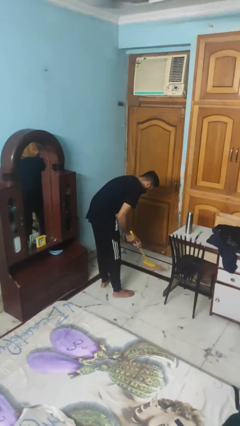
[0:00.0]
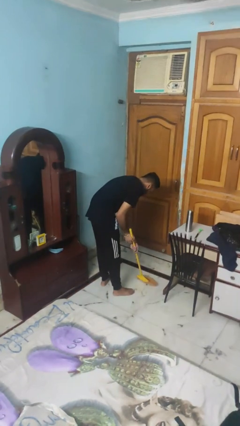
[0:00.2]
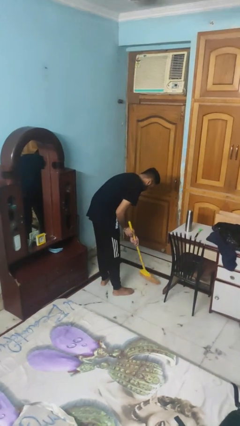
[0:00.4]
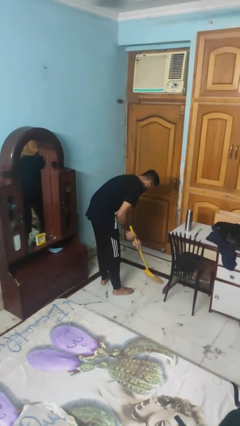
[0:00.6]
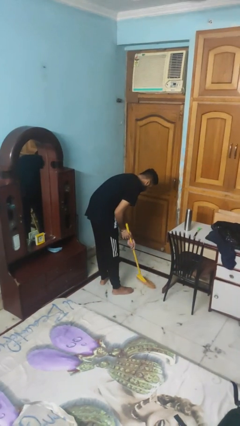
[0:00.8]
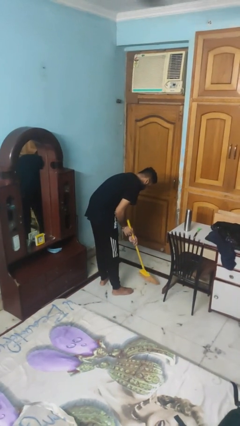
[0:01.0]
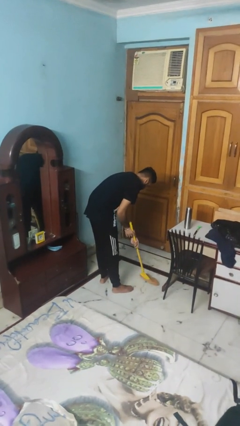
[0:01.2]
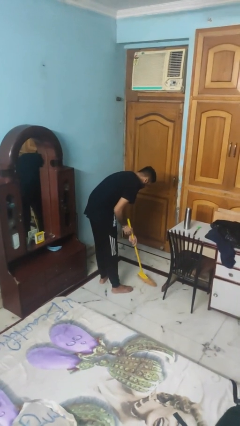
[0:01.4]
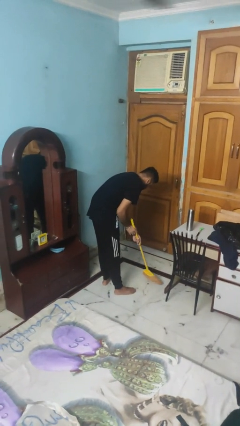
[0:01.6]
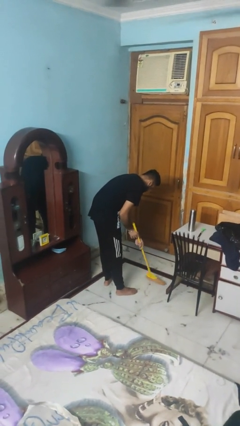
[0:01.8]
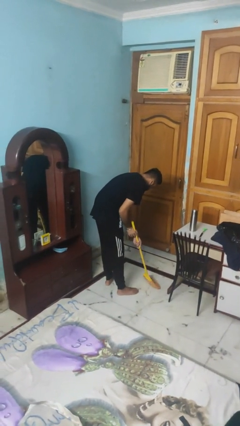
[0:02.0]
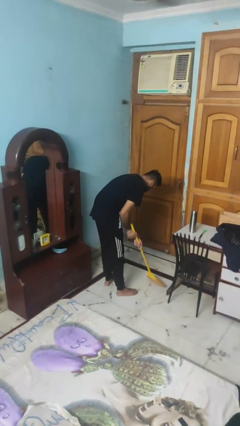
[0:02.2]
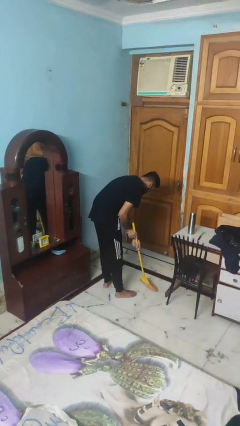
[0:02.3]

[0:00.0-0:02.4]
person sweeps floor

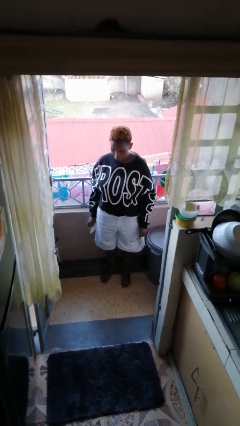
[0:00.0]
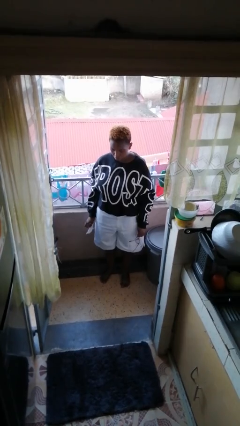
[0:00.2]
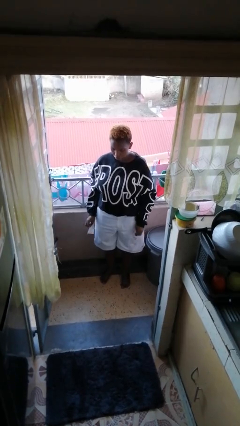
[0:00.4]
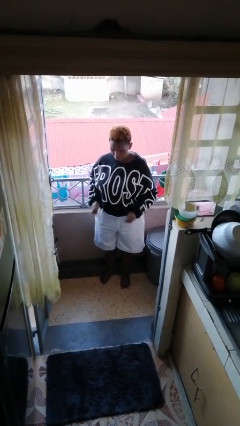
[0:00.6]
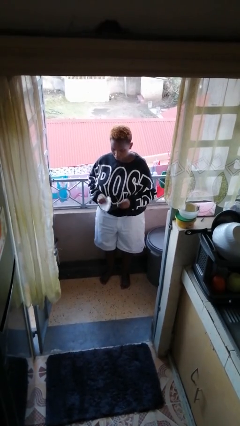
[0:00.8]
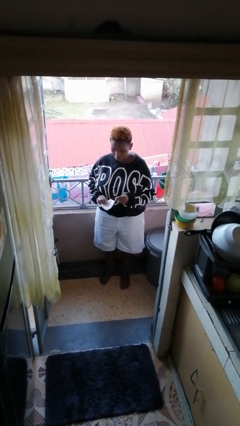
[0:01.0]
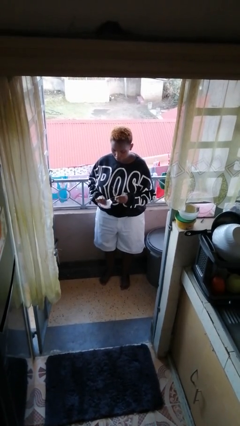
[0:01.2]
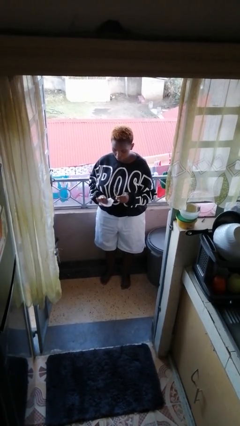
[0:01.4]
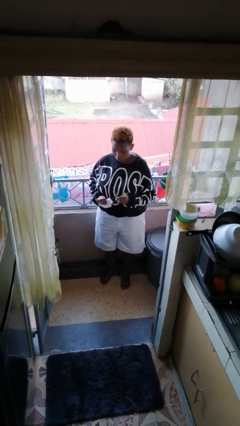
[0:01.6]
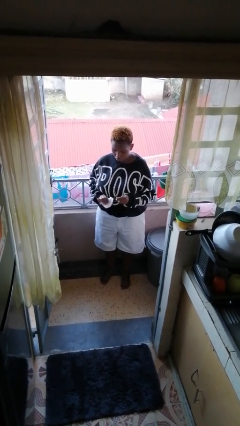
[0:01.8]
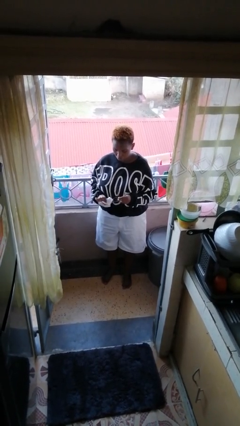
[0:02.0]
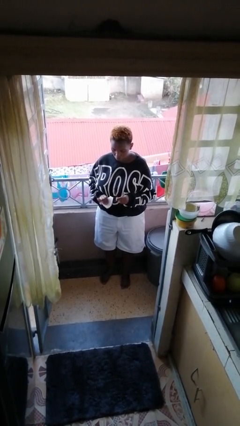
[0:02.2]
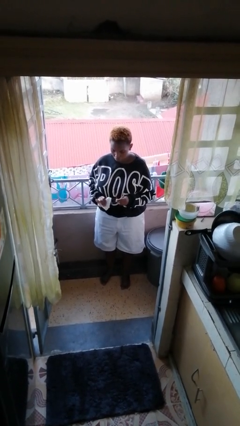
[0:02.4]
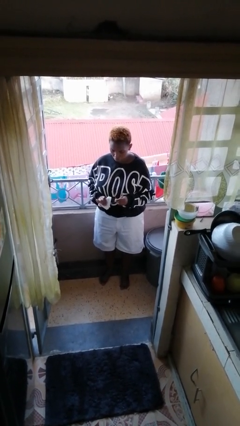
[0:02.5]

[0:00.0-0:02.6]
person cleans eyeglasses

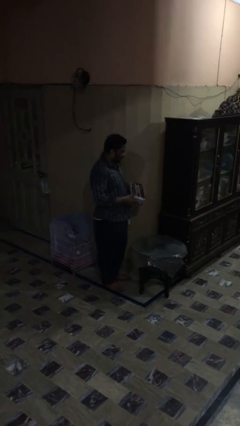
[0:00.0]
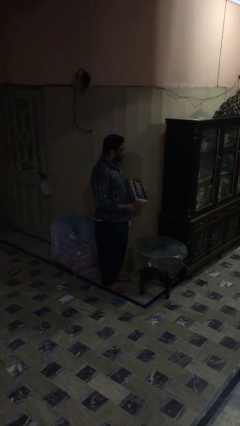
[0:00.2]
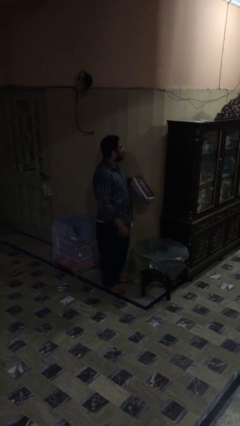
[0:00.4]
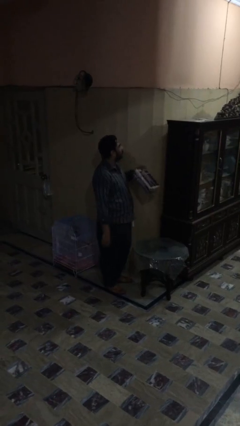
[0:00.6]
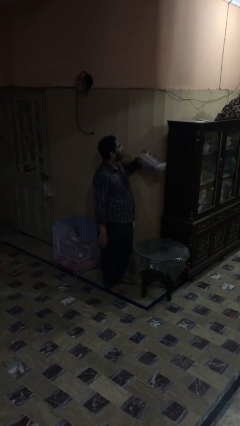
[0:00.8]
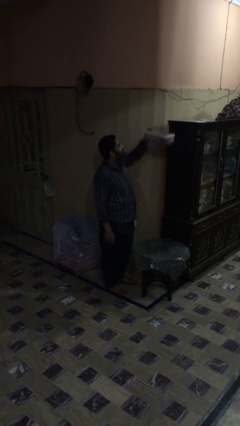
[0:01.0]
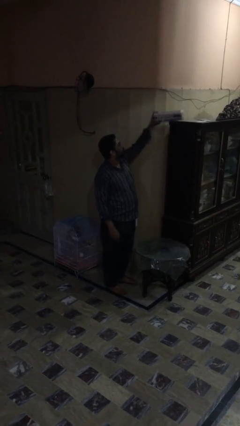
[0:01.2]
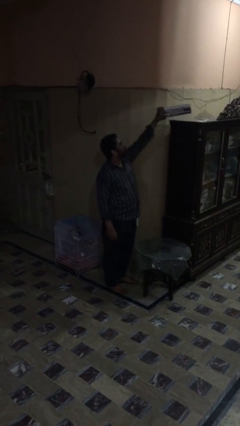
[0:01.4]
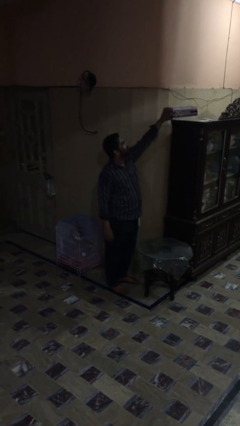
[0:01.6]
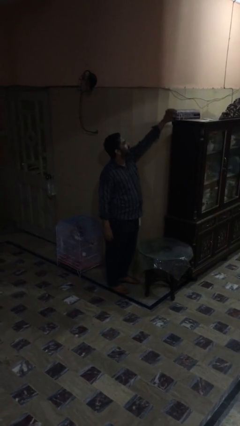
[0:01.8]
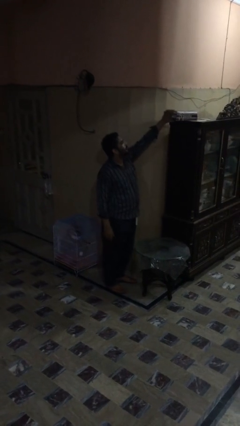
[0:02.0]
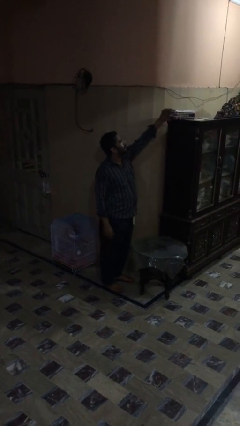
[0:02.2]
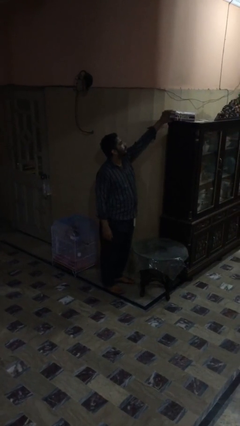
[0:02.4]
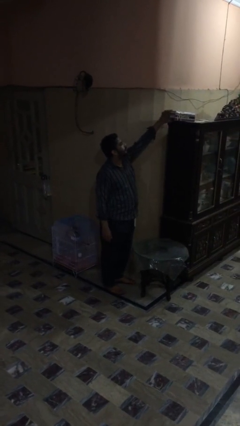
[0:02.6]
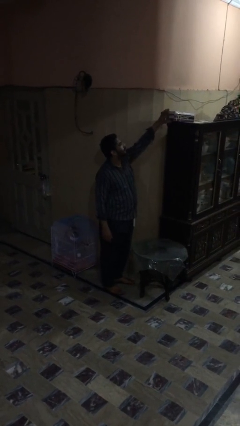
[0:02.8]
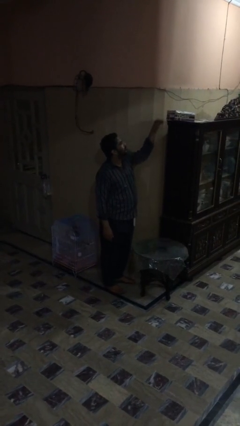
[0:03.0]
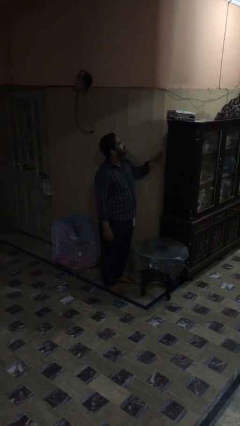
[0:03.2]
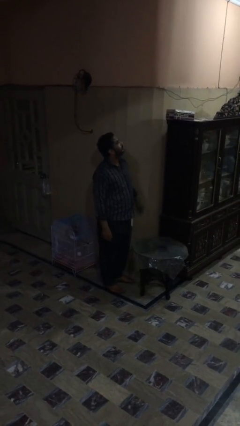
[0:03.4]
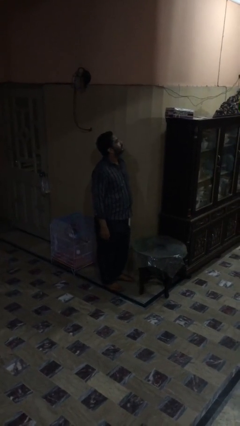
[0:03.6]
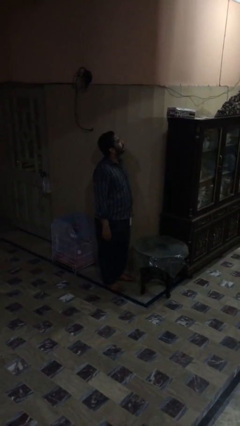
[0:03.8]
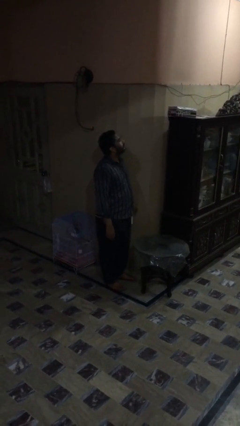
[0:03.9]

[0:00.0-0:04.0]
person puts down object on shelf

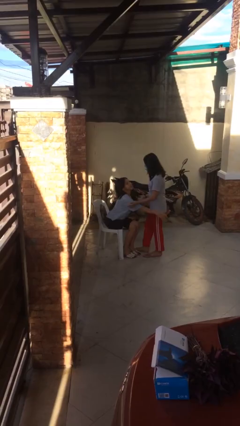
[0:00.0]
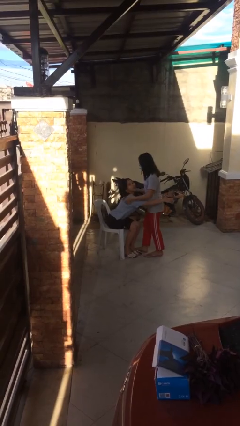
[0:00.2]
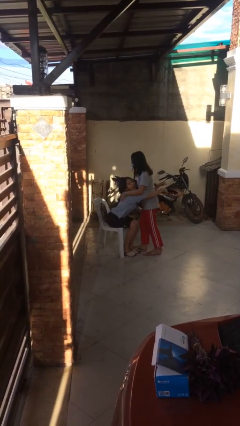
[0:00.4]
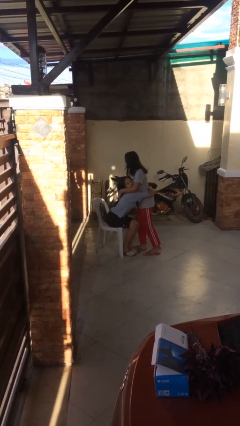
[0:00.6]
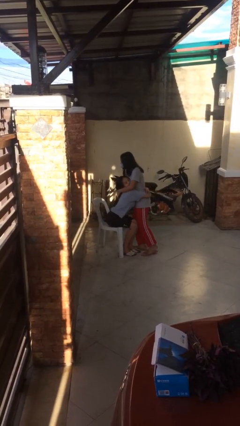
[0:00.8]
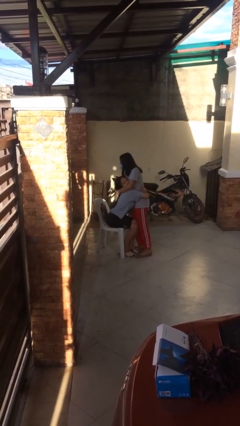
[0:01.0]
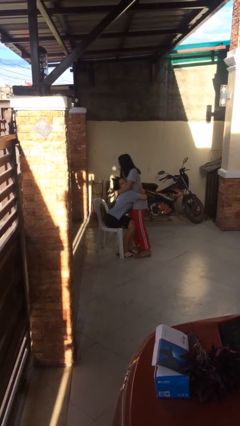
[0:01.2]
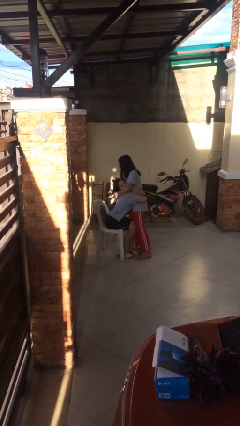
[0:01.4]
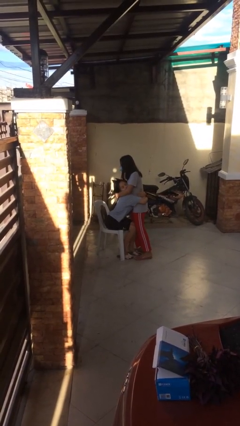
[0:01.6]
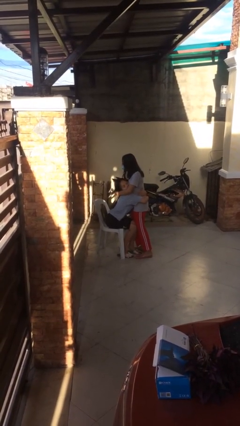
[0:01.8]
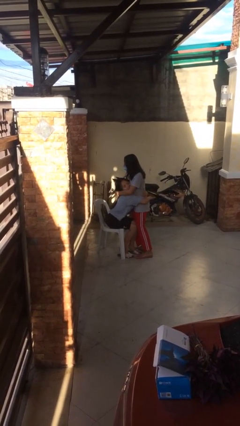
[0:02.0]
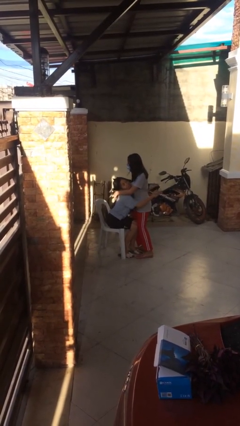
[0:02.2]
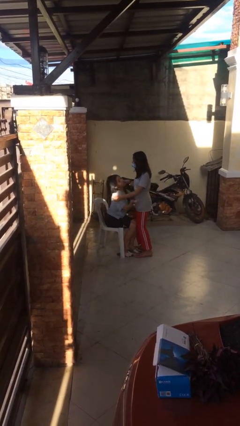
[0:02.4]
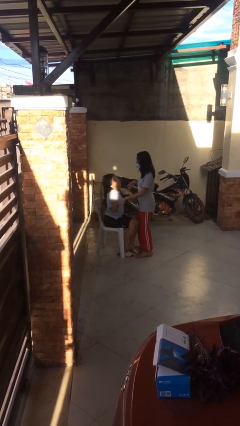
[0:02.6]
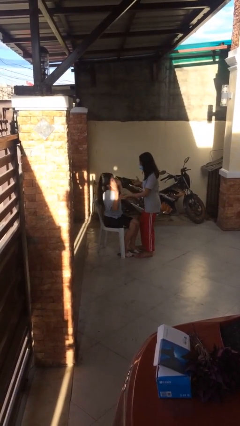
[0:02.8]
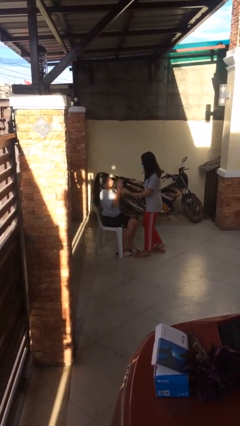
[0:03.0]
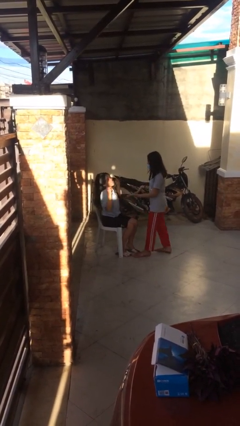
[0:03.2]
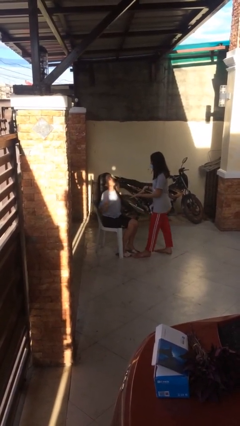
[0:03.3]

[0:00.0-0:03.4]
person embraces person

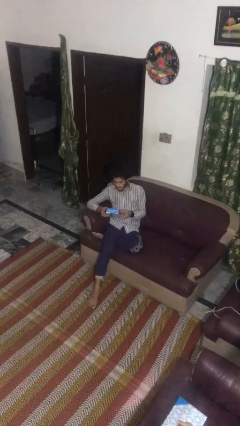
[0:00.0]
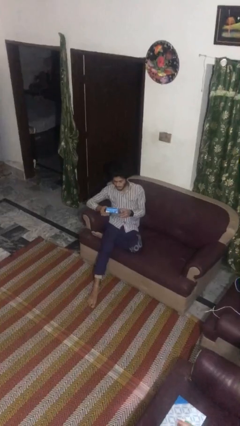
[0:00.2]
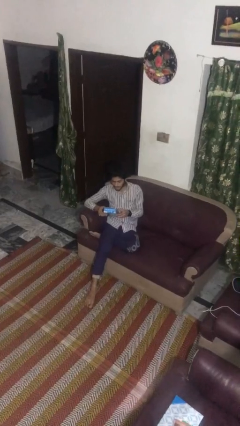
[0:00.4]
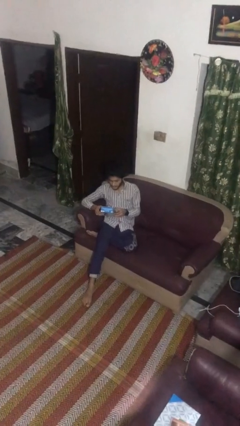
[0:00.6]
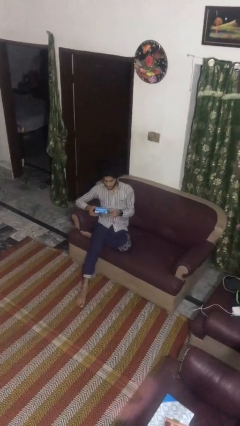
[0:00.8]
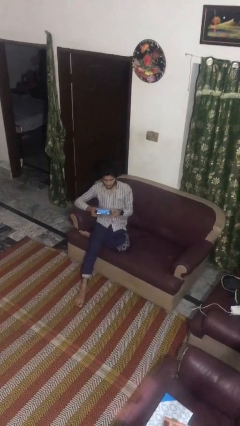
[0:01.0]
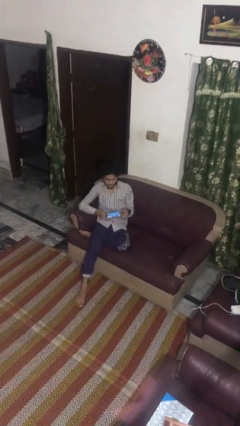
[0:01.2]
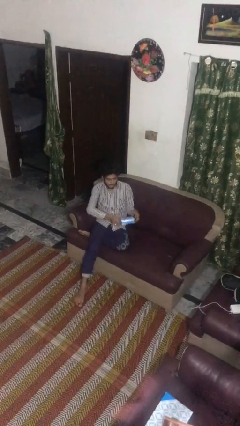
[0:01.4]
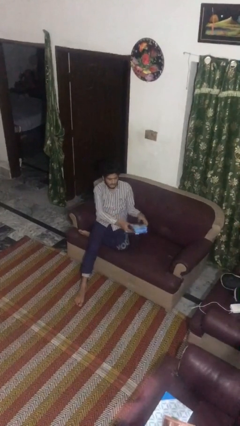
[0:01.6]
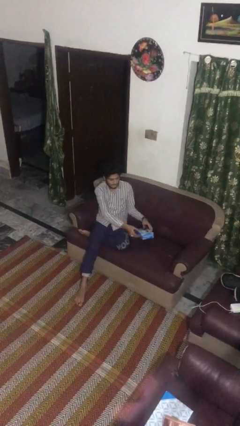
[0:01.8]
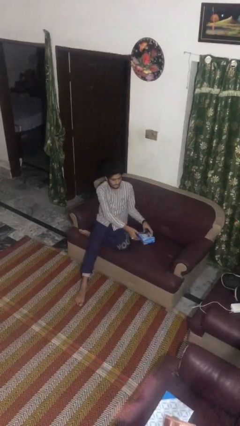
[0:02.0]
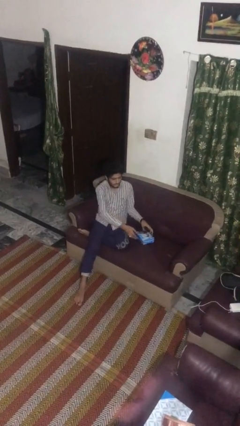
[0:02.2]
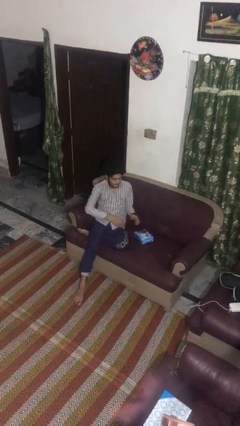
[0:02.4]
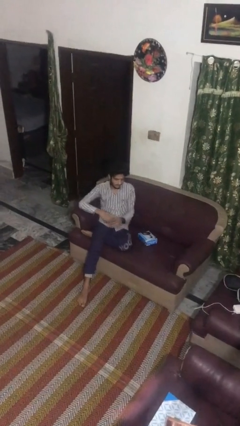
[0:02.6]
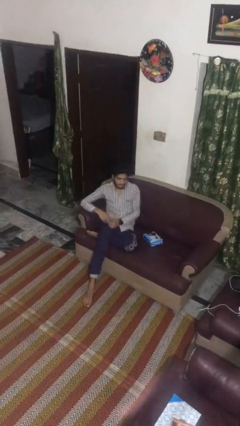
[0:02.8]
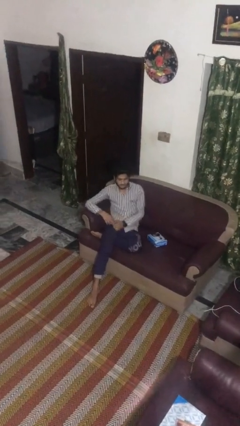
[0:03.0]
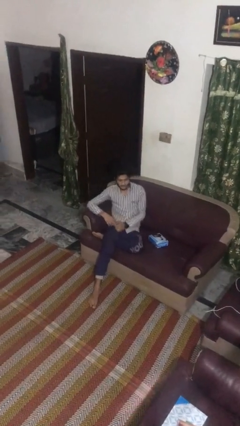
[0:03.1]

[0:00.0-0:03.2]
person puts down object on couch

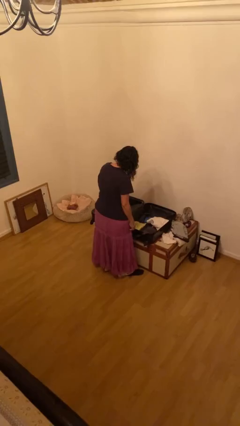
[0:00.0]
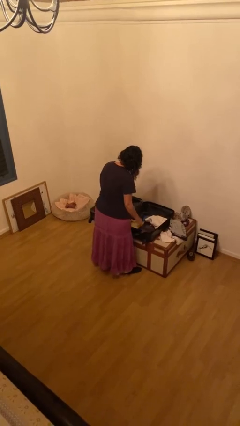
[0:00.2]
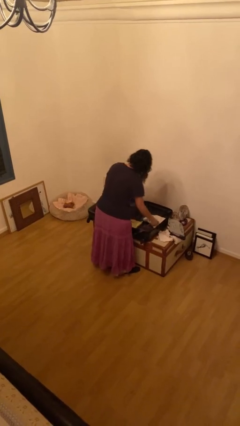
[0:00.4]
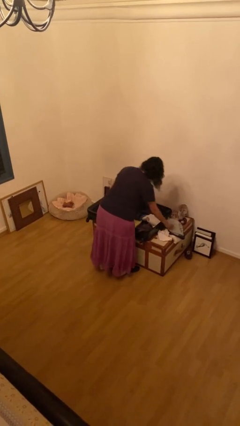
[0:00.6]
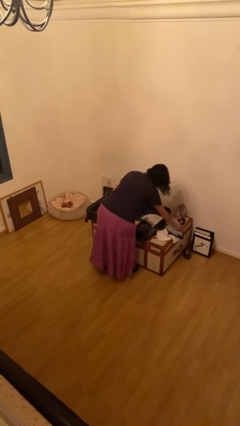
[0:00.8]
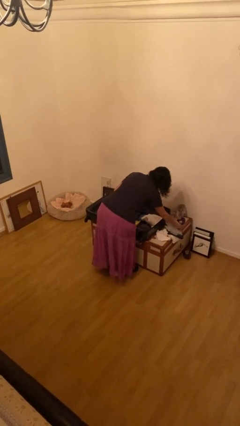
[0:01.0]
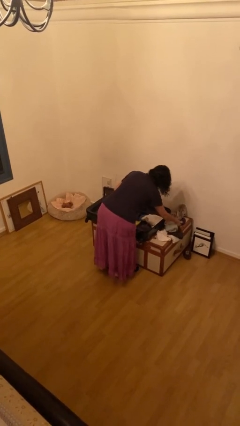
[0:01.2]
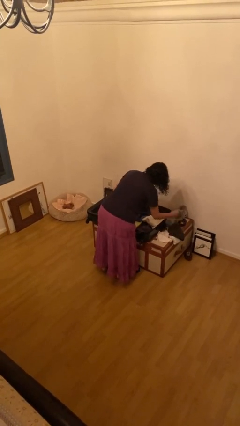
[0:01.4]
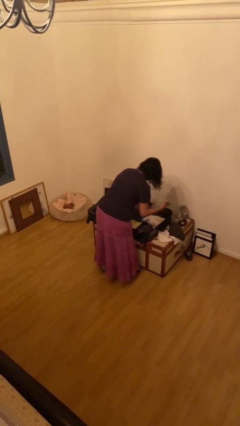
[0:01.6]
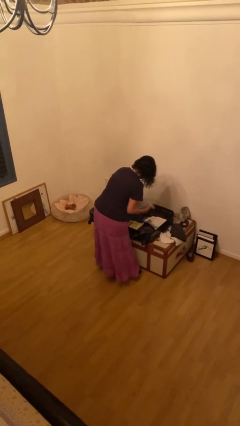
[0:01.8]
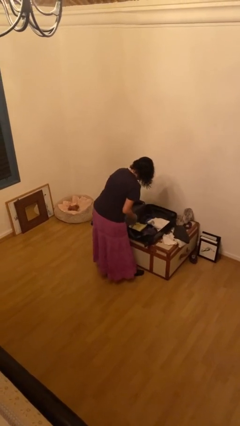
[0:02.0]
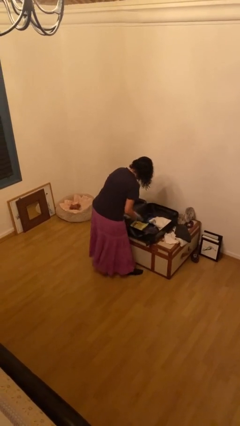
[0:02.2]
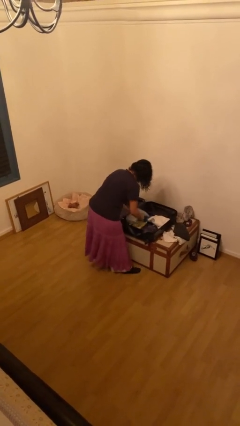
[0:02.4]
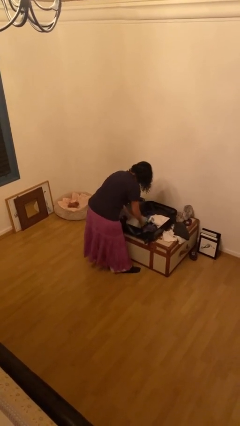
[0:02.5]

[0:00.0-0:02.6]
person unloads clothes from suitcase
